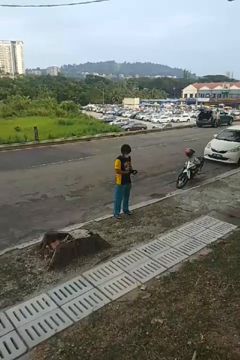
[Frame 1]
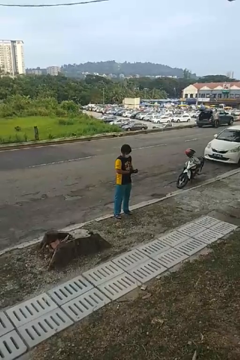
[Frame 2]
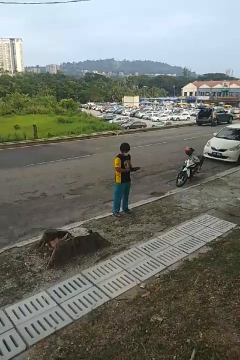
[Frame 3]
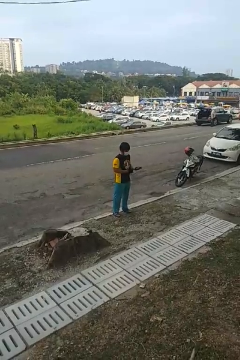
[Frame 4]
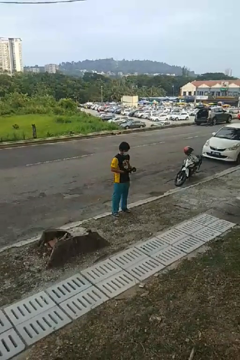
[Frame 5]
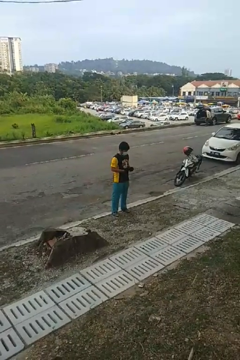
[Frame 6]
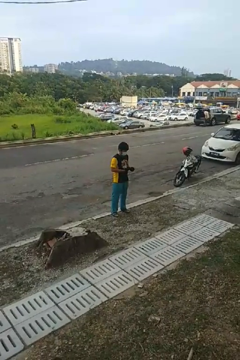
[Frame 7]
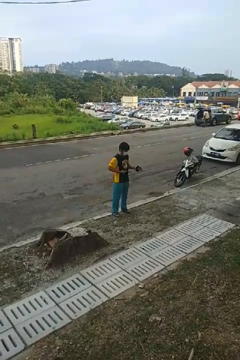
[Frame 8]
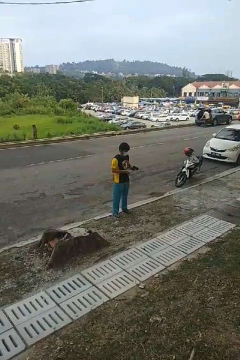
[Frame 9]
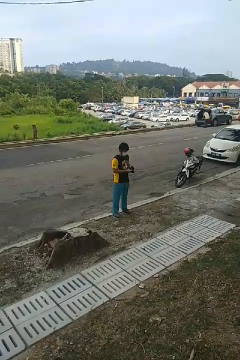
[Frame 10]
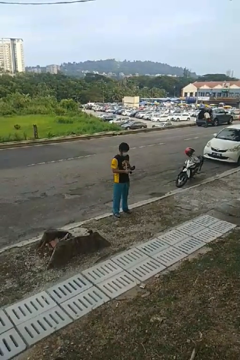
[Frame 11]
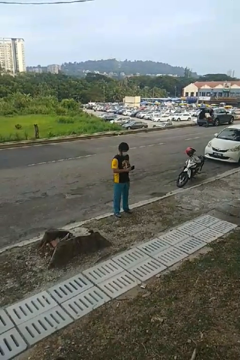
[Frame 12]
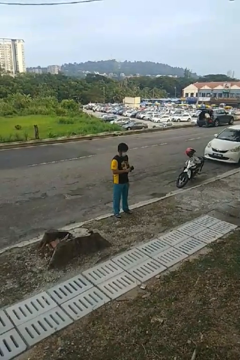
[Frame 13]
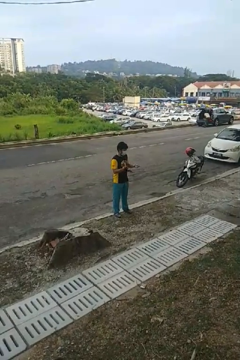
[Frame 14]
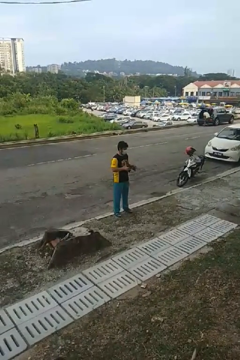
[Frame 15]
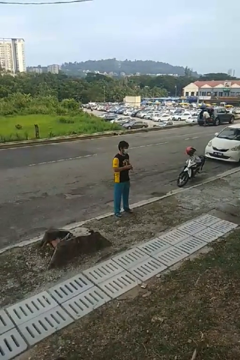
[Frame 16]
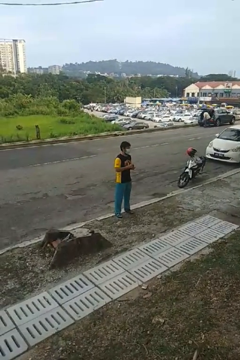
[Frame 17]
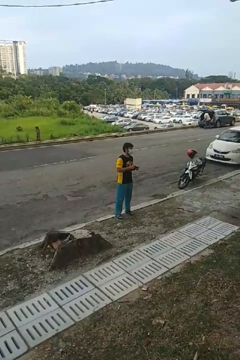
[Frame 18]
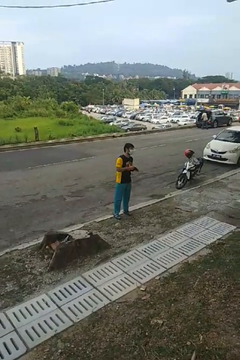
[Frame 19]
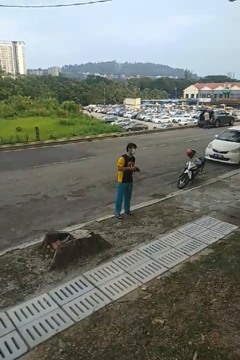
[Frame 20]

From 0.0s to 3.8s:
person takes off gloves

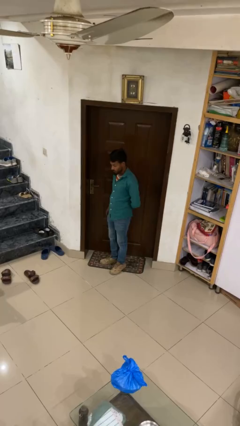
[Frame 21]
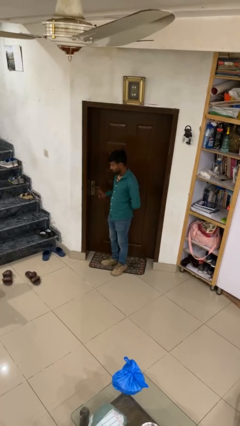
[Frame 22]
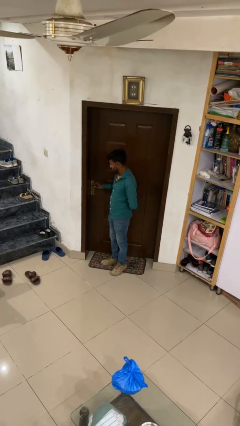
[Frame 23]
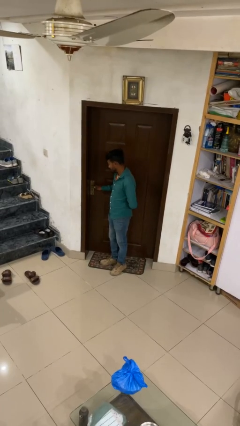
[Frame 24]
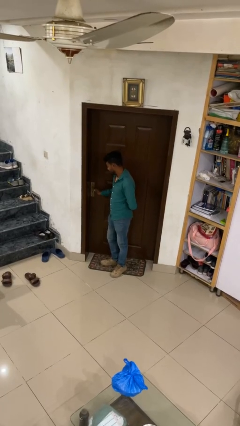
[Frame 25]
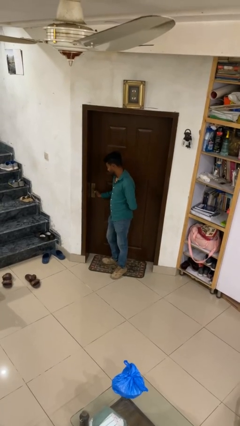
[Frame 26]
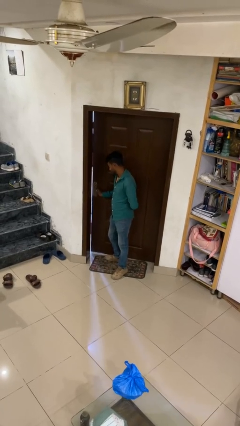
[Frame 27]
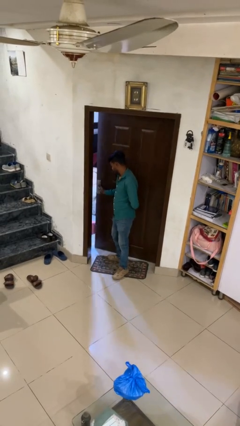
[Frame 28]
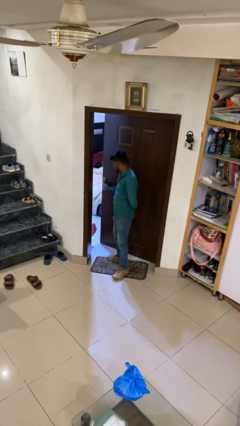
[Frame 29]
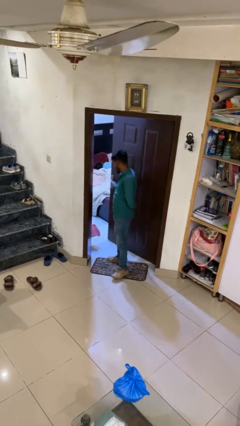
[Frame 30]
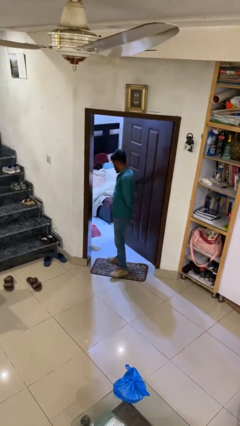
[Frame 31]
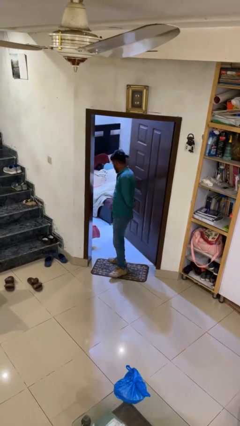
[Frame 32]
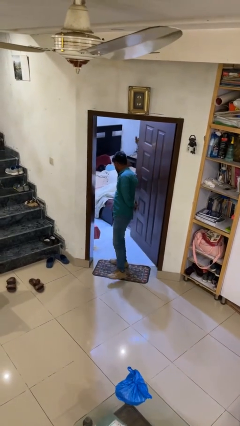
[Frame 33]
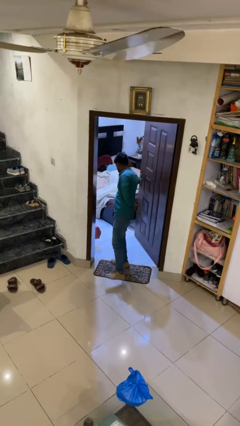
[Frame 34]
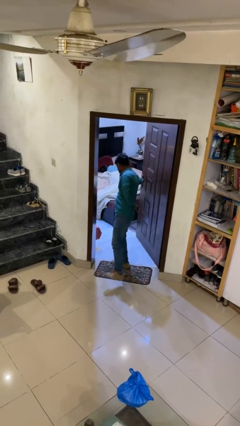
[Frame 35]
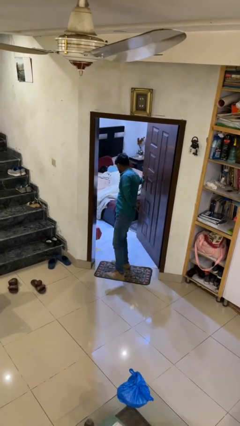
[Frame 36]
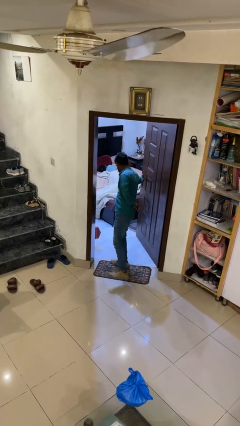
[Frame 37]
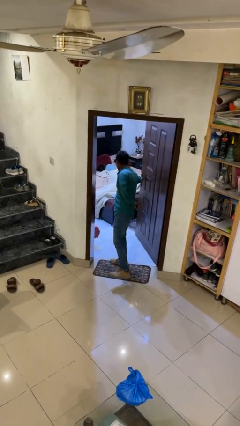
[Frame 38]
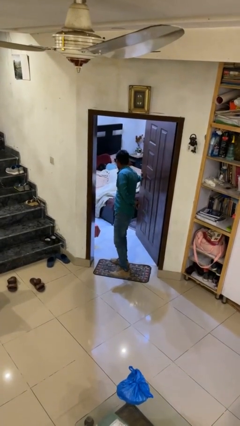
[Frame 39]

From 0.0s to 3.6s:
person opens facility door

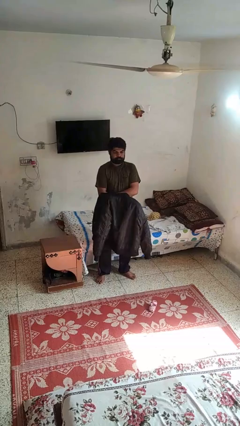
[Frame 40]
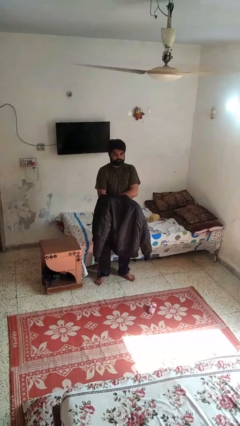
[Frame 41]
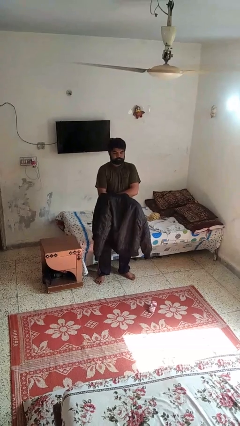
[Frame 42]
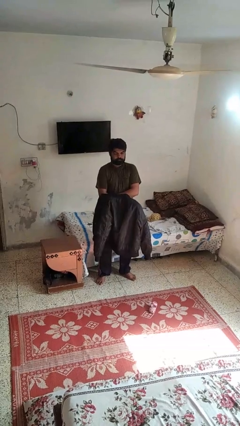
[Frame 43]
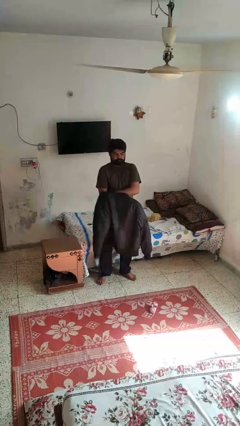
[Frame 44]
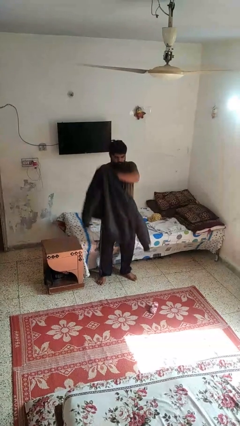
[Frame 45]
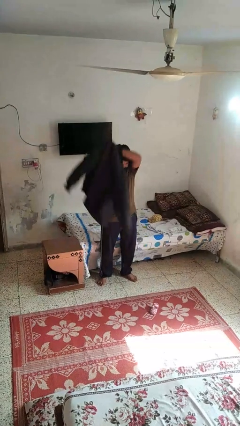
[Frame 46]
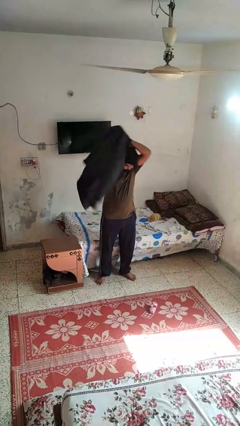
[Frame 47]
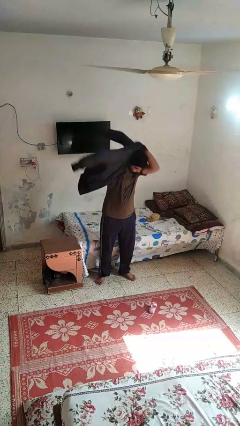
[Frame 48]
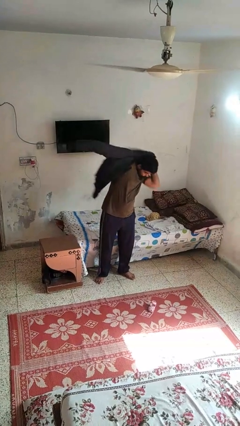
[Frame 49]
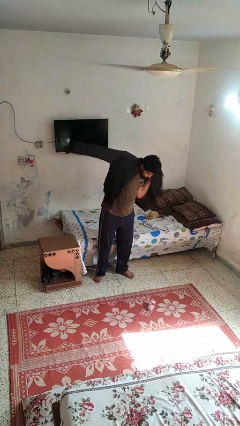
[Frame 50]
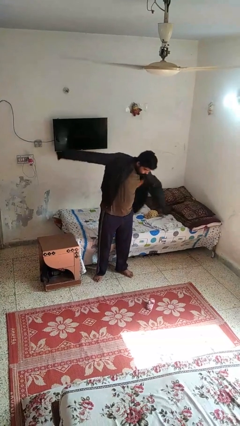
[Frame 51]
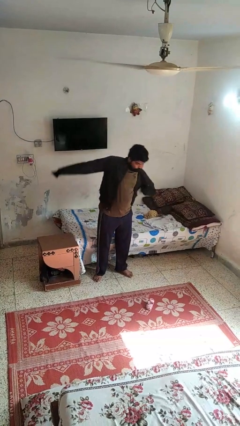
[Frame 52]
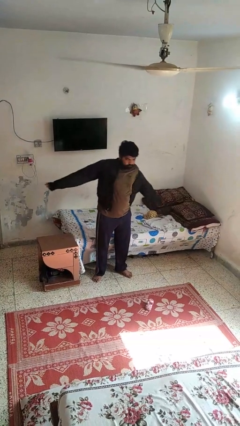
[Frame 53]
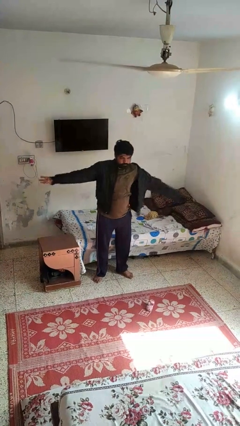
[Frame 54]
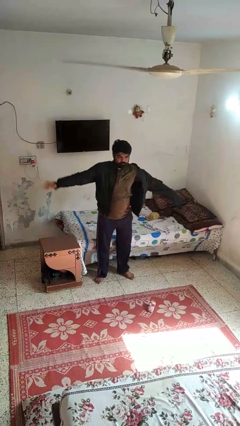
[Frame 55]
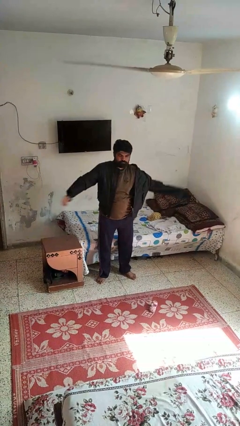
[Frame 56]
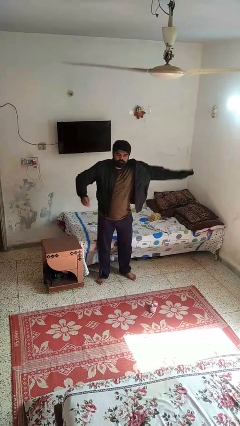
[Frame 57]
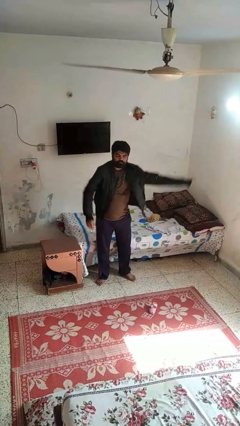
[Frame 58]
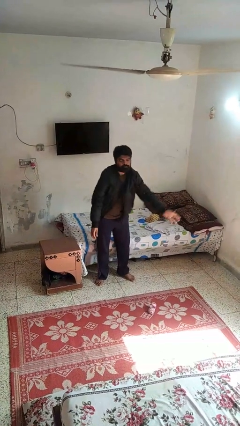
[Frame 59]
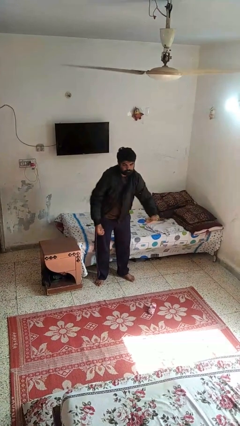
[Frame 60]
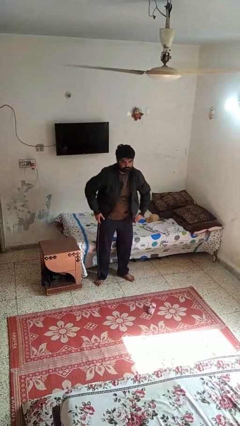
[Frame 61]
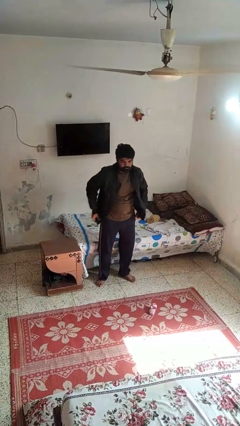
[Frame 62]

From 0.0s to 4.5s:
person puts on jacket

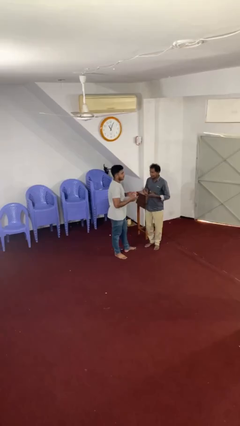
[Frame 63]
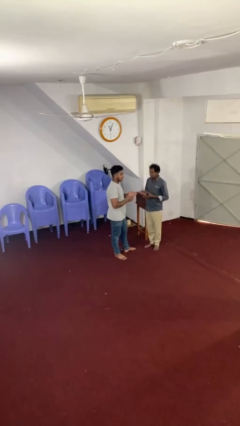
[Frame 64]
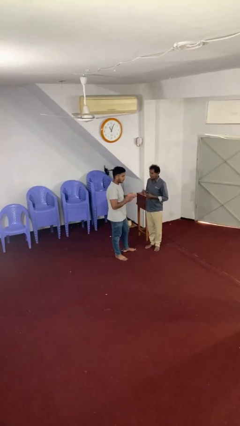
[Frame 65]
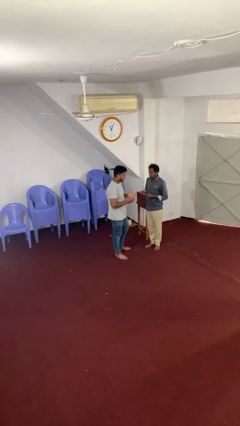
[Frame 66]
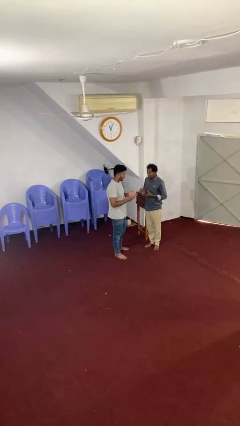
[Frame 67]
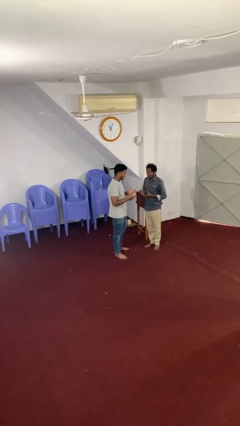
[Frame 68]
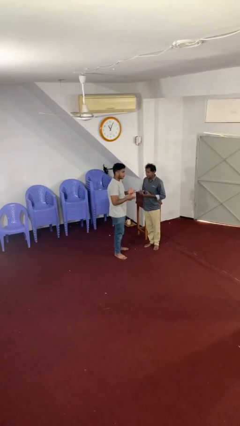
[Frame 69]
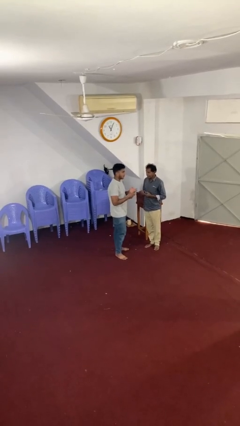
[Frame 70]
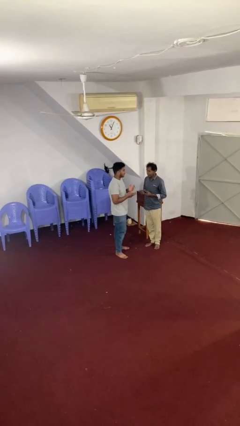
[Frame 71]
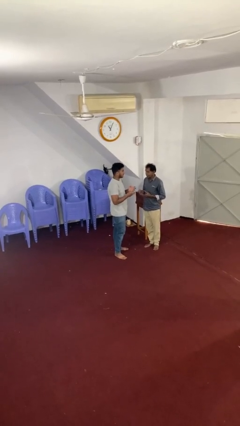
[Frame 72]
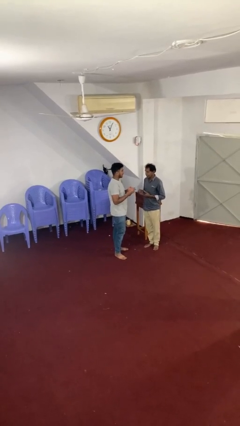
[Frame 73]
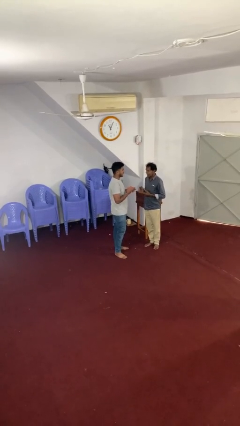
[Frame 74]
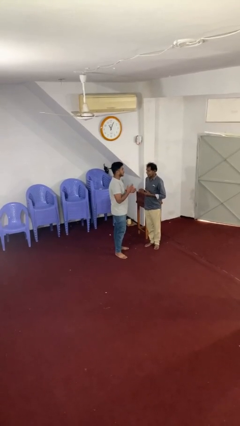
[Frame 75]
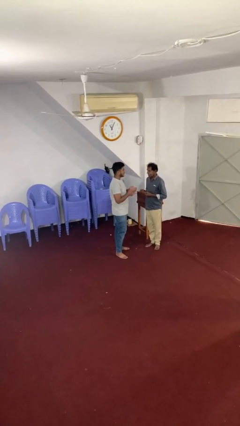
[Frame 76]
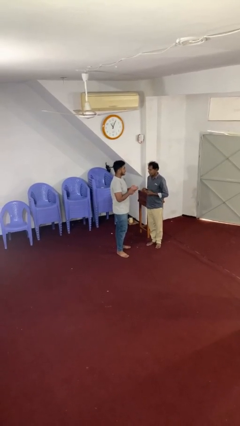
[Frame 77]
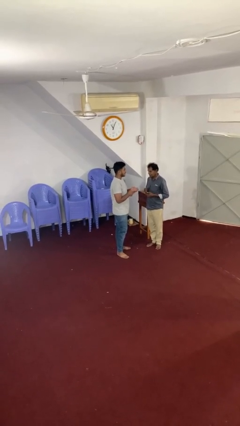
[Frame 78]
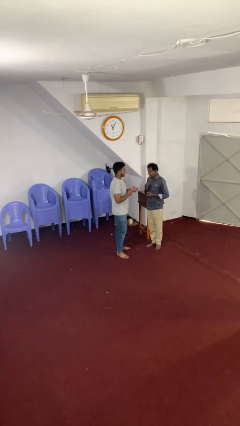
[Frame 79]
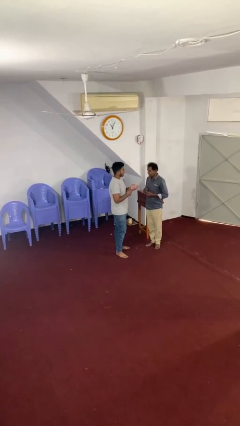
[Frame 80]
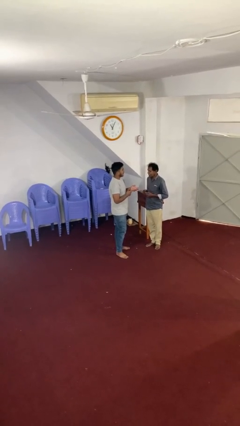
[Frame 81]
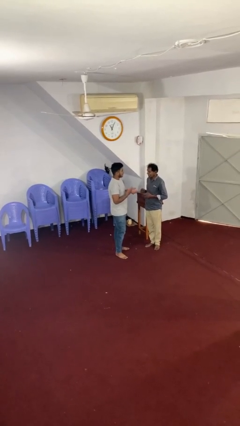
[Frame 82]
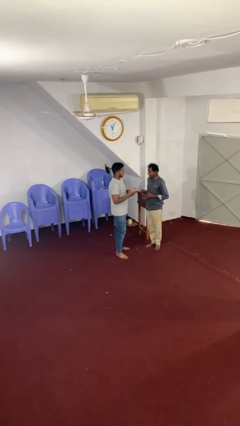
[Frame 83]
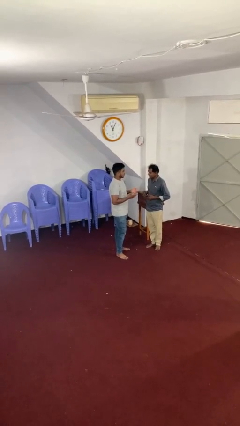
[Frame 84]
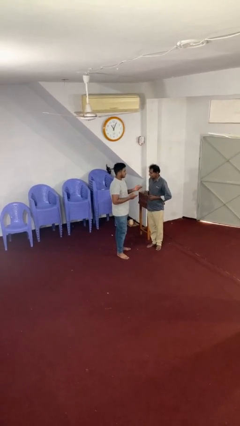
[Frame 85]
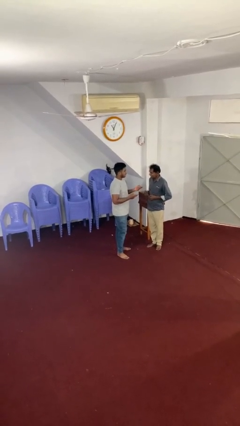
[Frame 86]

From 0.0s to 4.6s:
person talks to person

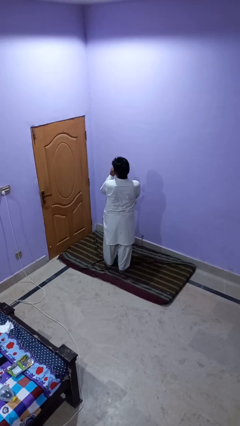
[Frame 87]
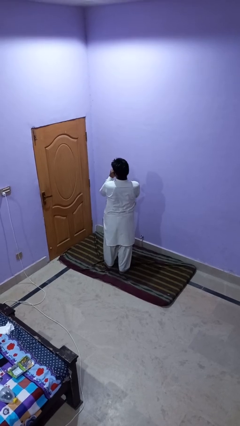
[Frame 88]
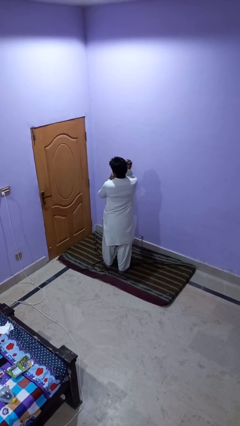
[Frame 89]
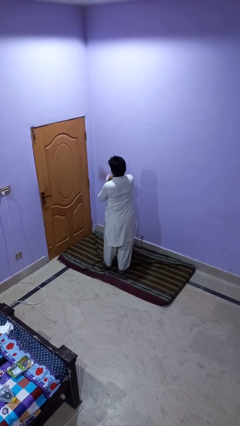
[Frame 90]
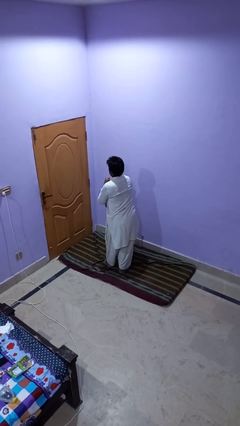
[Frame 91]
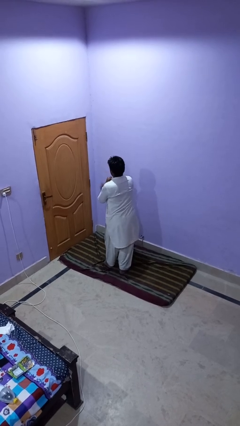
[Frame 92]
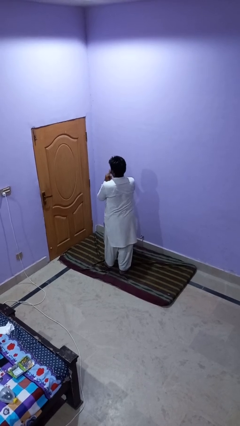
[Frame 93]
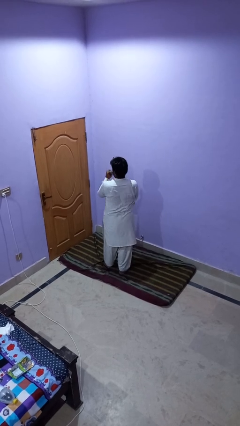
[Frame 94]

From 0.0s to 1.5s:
person karate chop

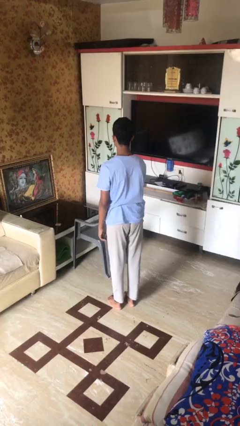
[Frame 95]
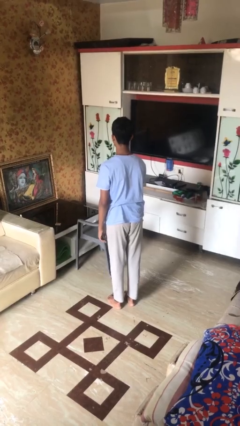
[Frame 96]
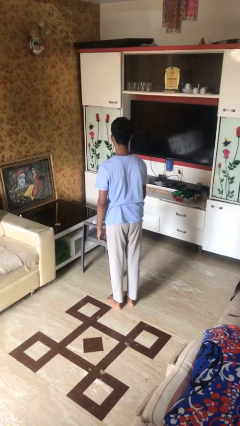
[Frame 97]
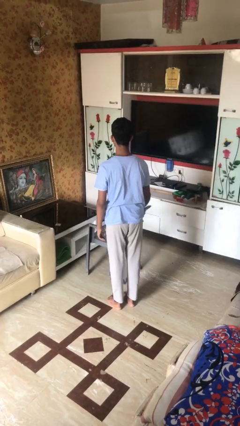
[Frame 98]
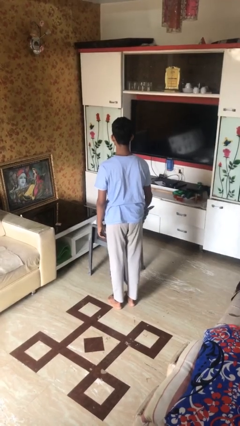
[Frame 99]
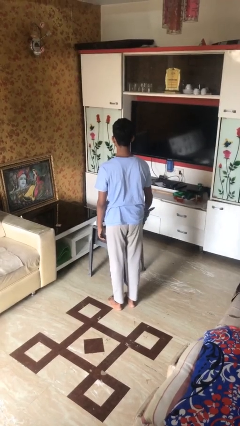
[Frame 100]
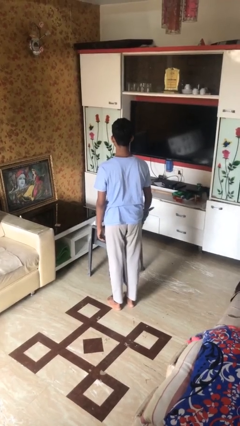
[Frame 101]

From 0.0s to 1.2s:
person pulls out chair
